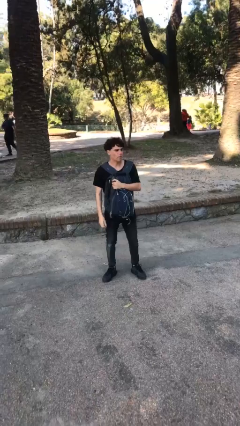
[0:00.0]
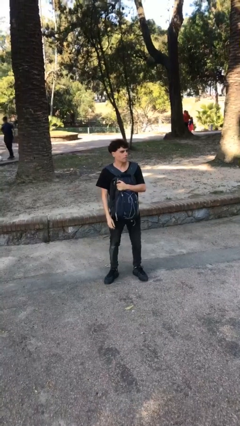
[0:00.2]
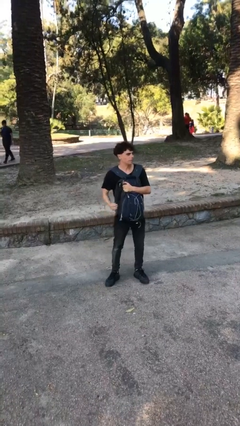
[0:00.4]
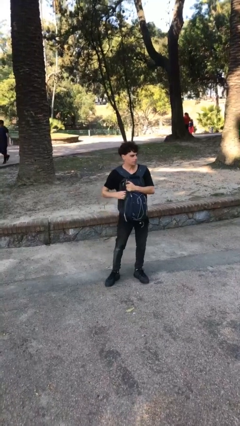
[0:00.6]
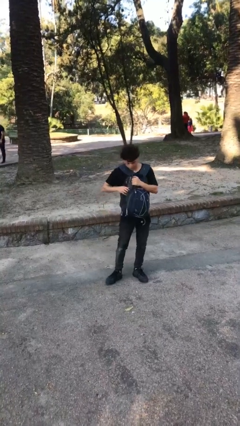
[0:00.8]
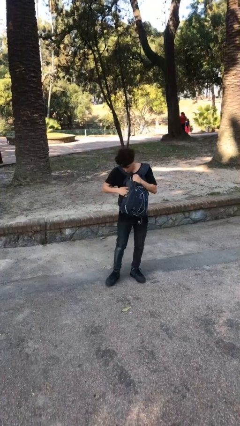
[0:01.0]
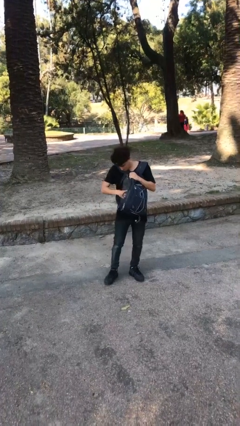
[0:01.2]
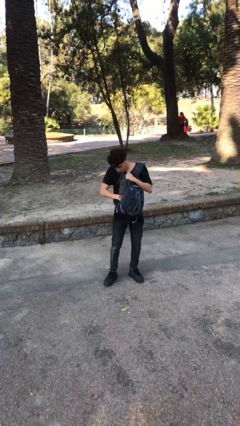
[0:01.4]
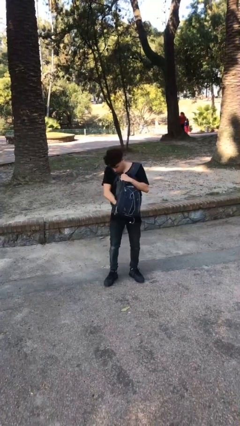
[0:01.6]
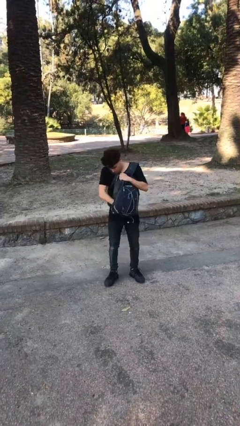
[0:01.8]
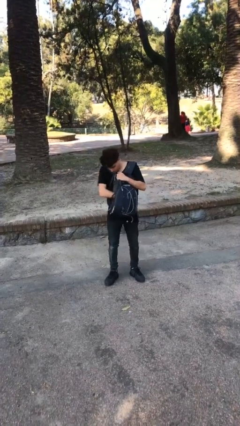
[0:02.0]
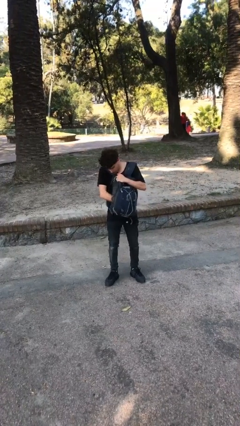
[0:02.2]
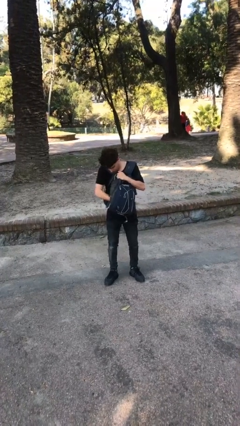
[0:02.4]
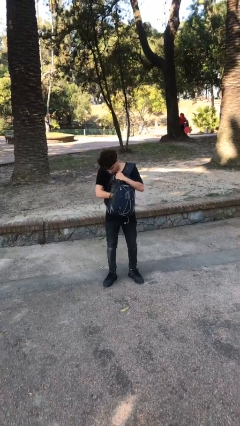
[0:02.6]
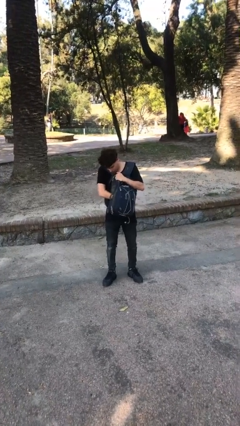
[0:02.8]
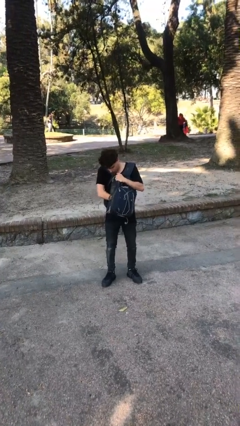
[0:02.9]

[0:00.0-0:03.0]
person searches in backpack

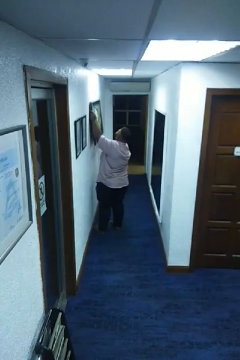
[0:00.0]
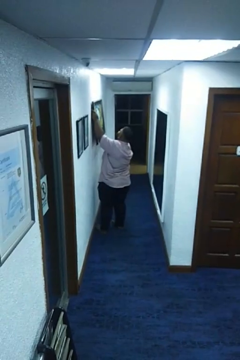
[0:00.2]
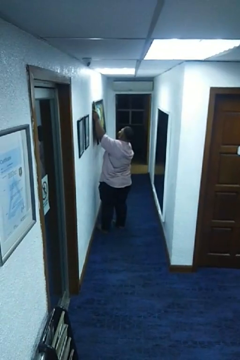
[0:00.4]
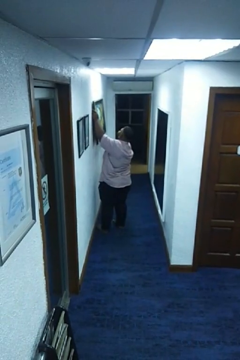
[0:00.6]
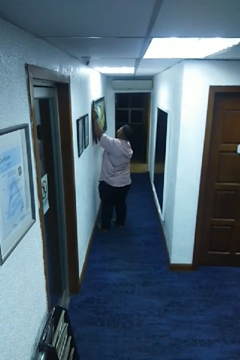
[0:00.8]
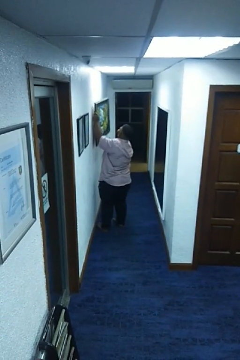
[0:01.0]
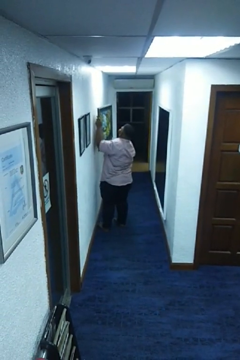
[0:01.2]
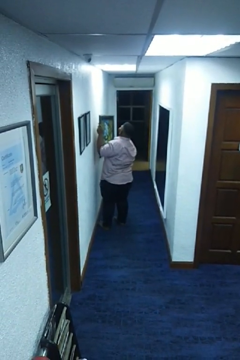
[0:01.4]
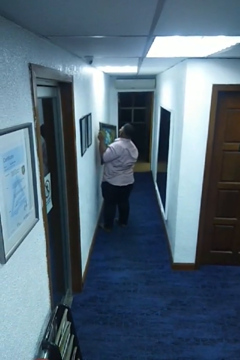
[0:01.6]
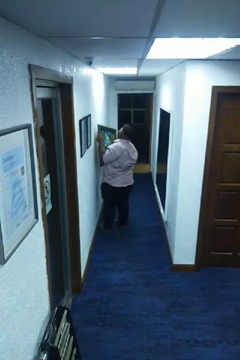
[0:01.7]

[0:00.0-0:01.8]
person takes down picture frame

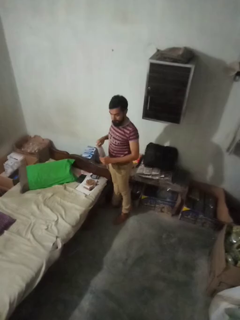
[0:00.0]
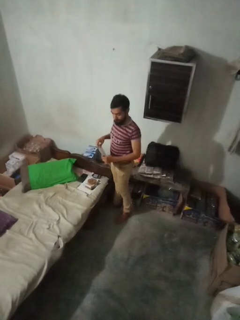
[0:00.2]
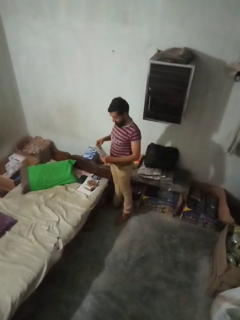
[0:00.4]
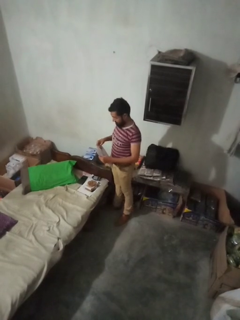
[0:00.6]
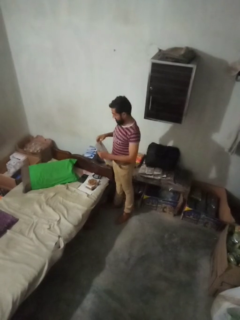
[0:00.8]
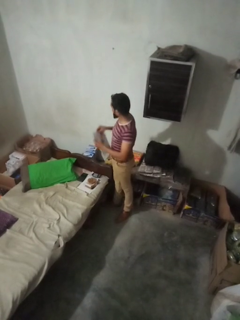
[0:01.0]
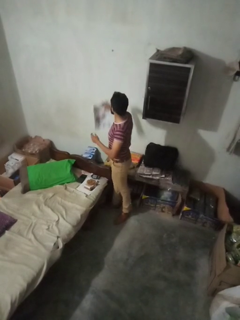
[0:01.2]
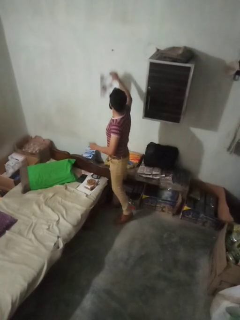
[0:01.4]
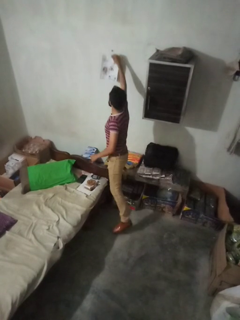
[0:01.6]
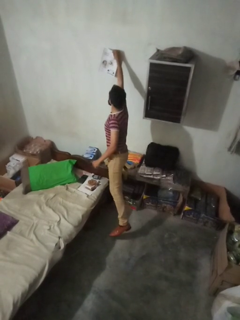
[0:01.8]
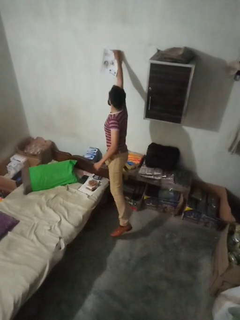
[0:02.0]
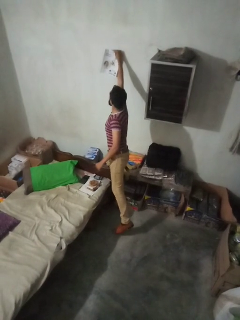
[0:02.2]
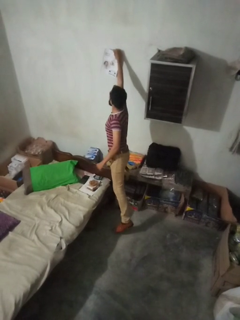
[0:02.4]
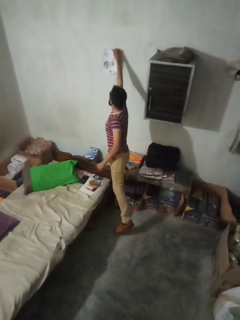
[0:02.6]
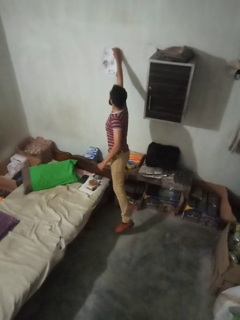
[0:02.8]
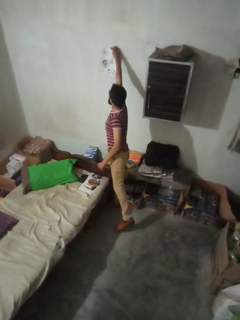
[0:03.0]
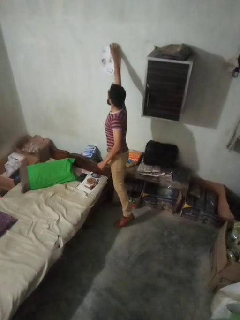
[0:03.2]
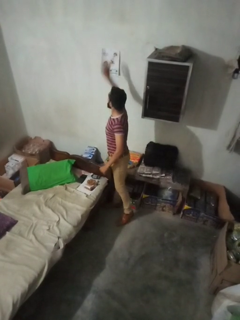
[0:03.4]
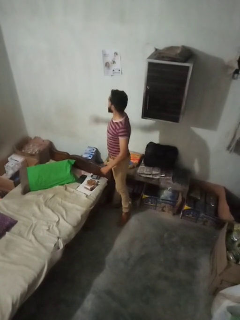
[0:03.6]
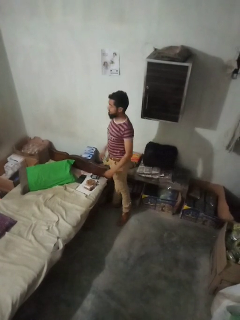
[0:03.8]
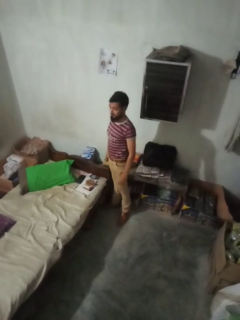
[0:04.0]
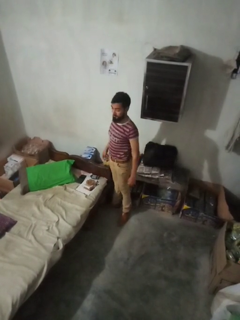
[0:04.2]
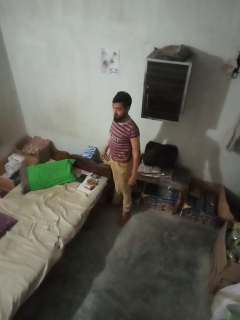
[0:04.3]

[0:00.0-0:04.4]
person puts up picture frame

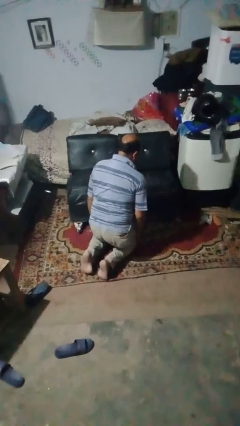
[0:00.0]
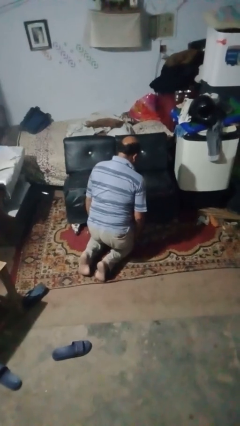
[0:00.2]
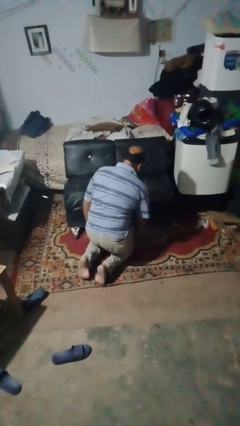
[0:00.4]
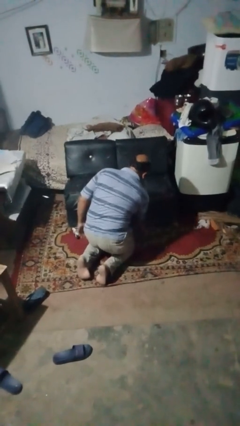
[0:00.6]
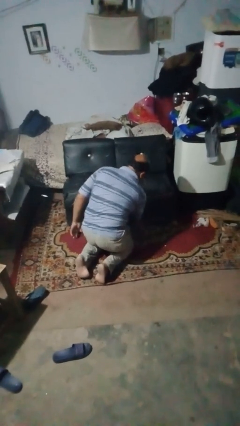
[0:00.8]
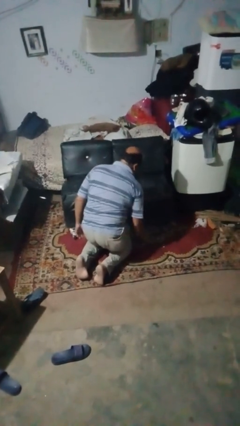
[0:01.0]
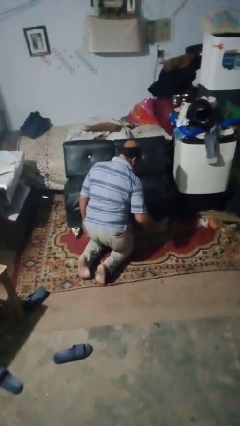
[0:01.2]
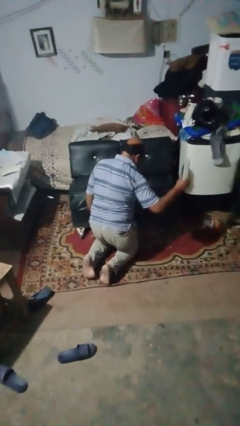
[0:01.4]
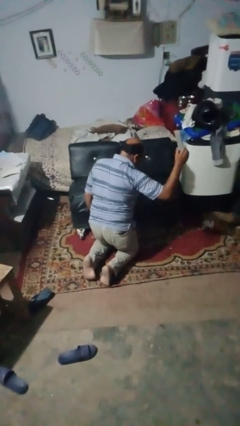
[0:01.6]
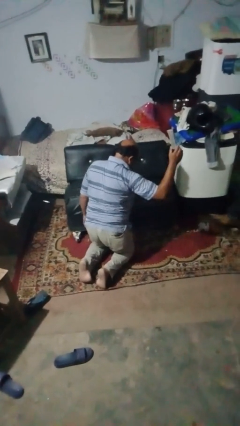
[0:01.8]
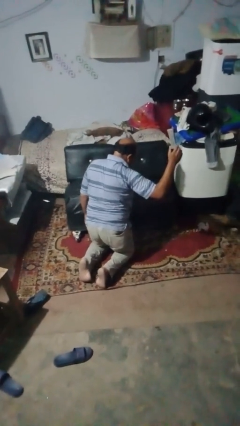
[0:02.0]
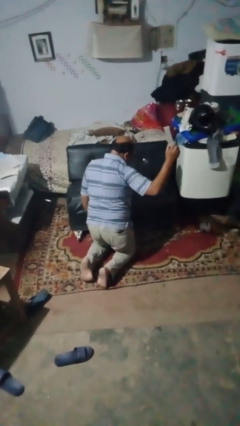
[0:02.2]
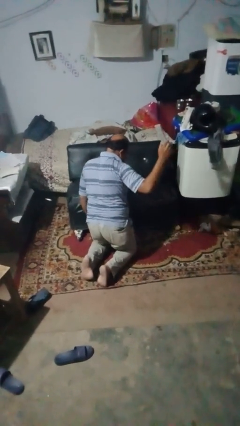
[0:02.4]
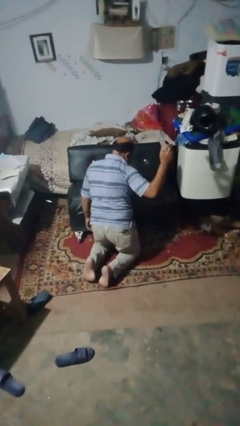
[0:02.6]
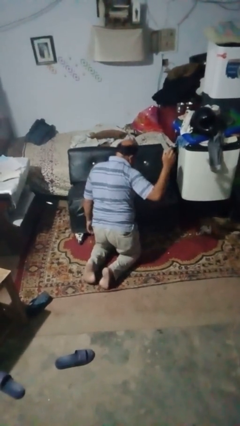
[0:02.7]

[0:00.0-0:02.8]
person searches under couch

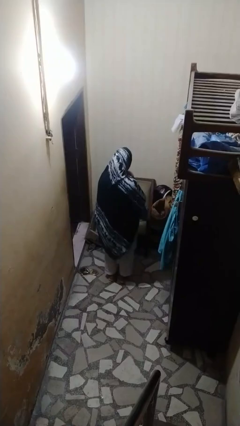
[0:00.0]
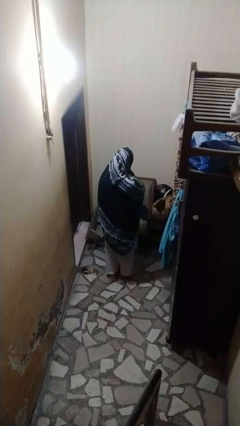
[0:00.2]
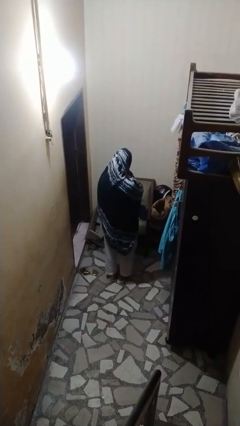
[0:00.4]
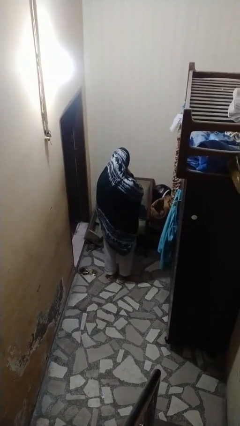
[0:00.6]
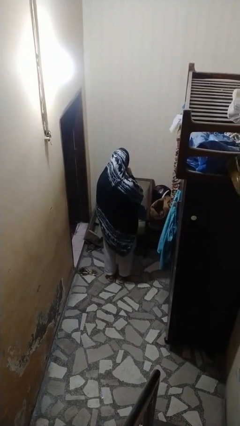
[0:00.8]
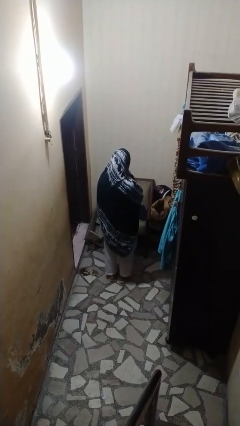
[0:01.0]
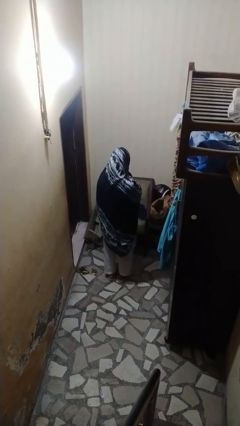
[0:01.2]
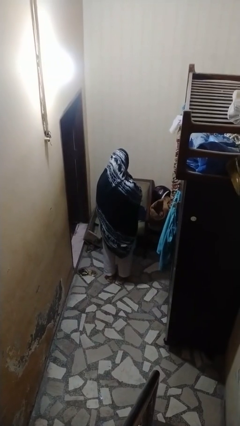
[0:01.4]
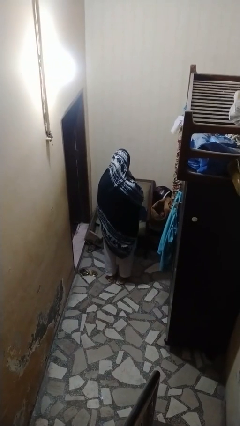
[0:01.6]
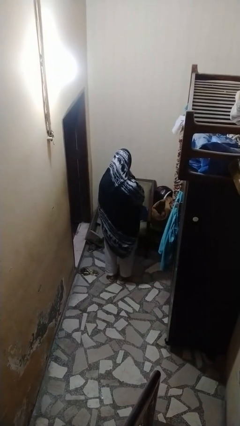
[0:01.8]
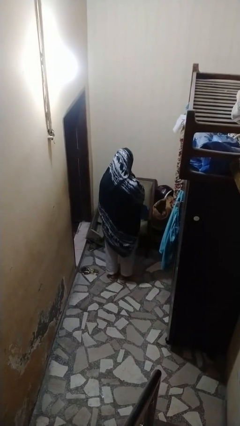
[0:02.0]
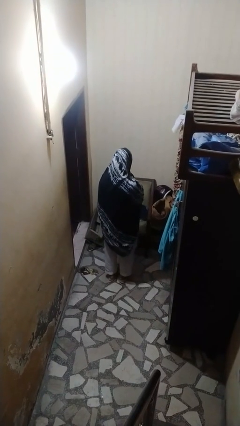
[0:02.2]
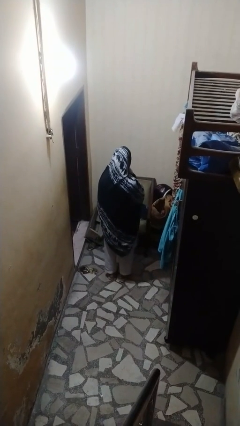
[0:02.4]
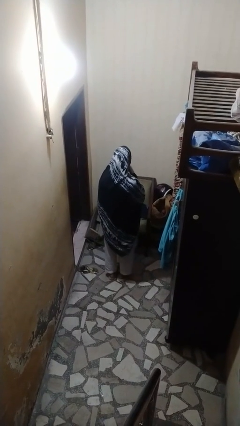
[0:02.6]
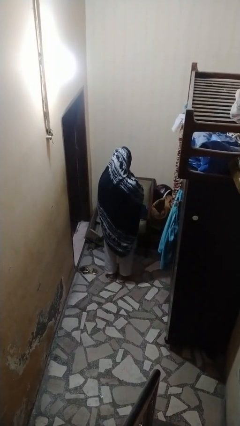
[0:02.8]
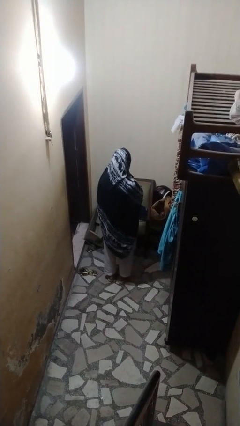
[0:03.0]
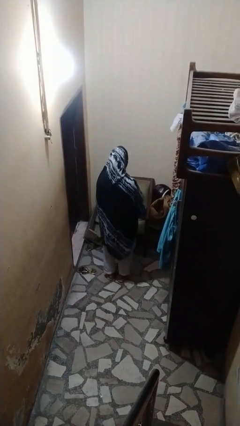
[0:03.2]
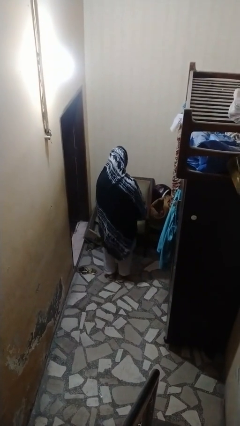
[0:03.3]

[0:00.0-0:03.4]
person strokes chin

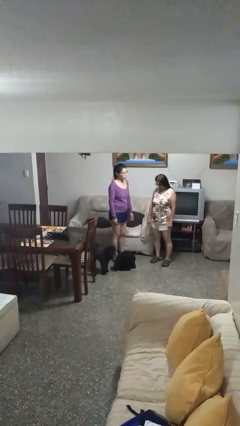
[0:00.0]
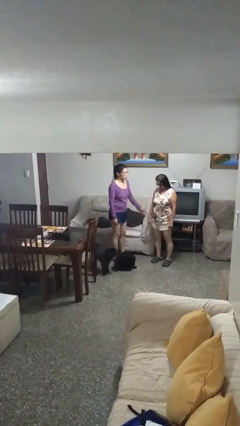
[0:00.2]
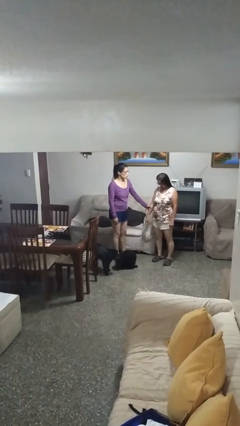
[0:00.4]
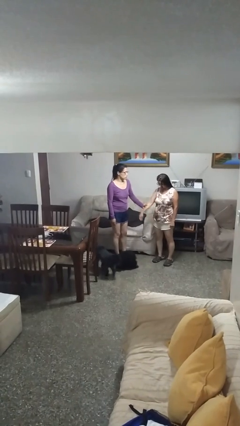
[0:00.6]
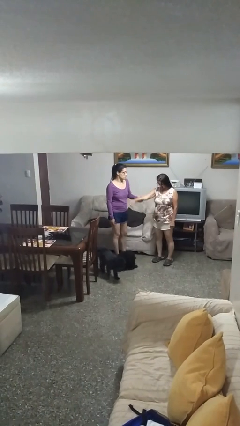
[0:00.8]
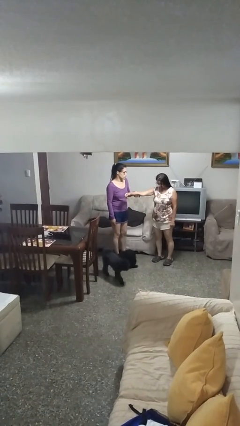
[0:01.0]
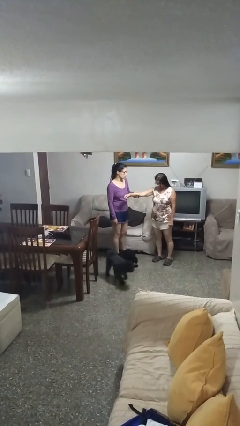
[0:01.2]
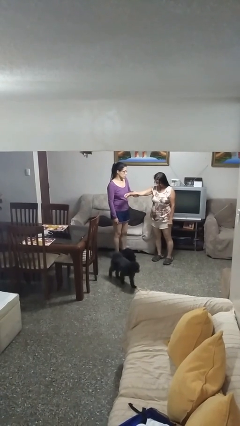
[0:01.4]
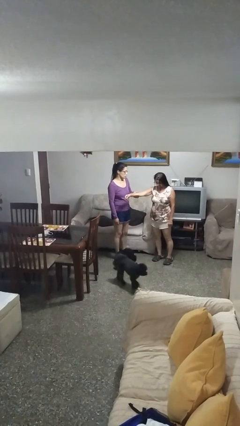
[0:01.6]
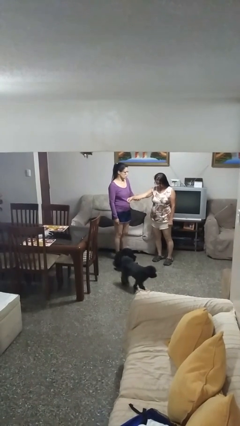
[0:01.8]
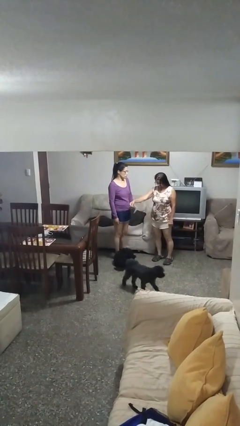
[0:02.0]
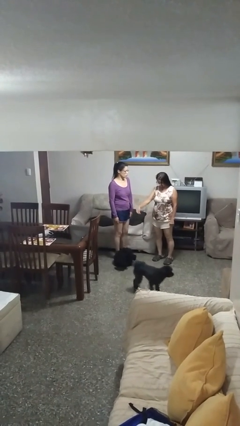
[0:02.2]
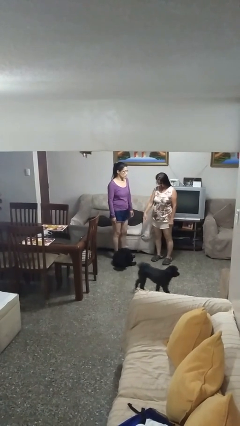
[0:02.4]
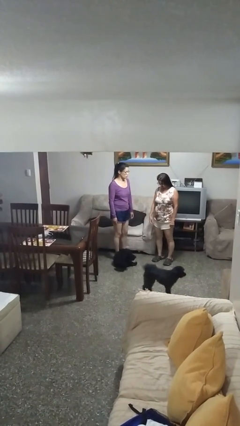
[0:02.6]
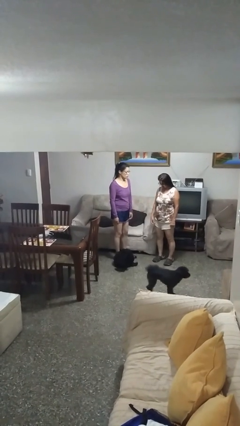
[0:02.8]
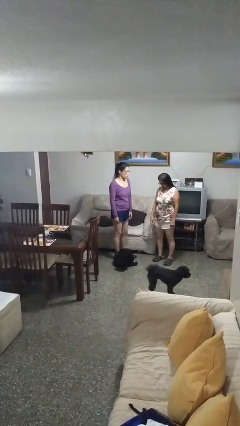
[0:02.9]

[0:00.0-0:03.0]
person grabs person by forearm

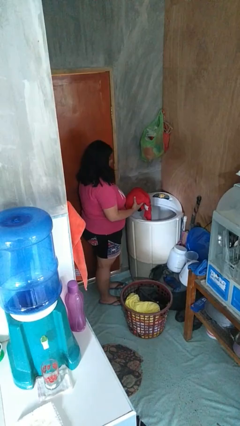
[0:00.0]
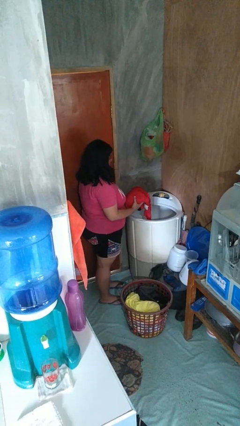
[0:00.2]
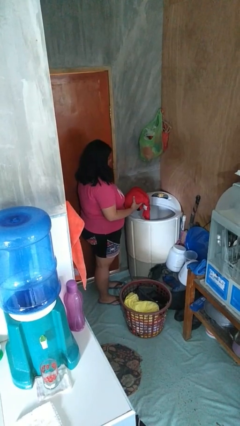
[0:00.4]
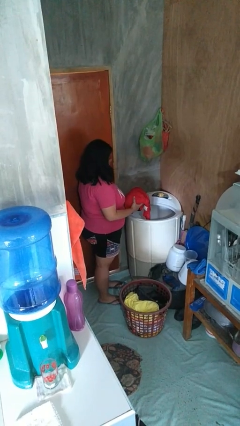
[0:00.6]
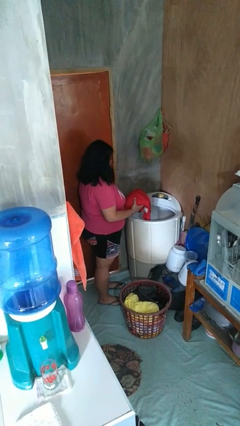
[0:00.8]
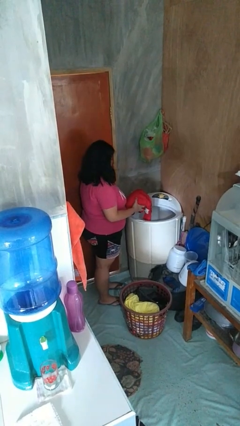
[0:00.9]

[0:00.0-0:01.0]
person loads dryer
